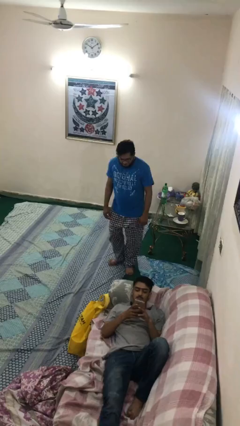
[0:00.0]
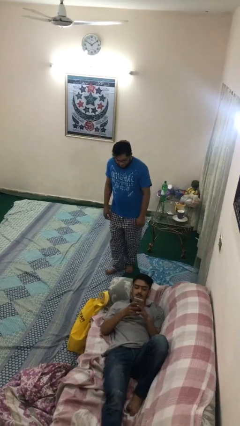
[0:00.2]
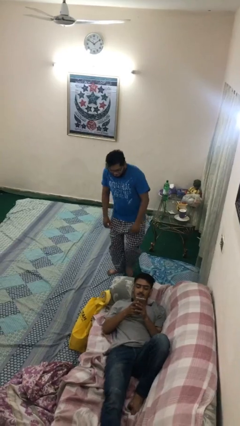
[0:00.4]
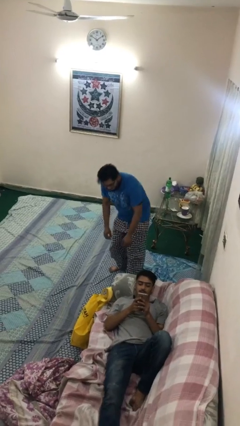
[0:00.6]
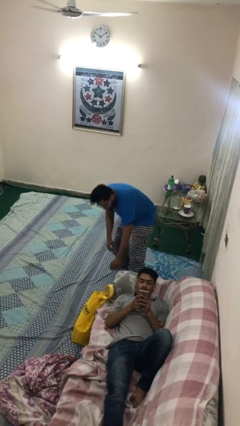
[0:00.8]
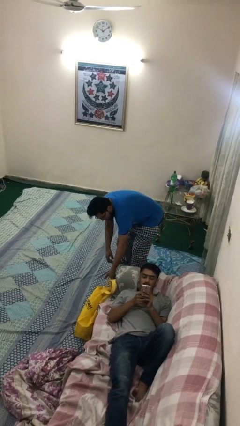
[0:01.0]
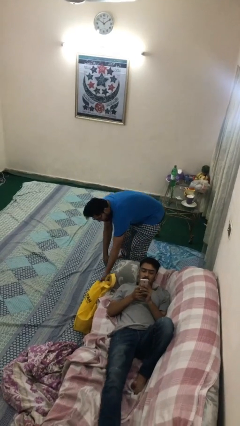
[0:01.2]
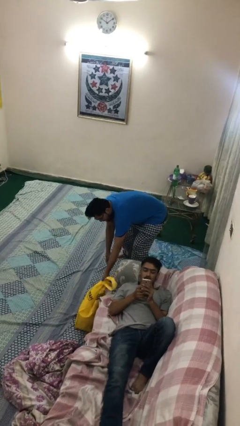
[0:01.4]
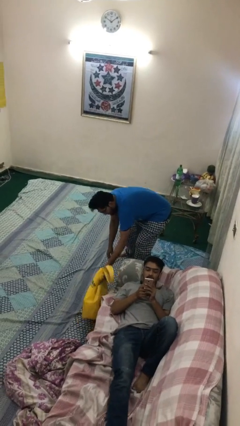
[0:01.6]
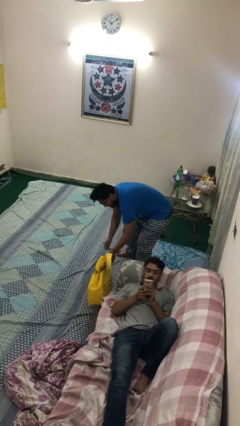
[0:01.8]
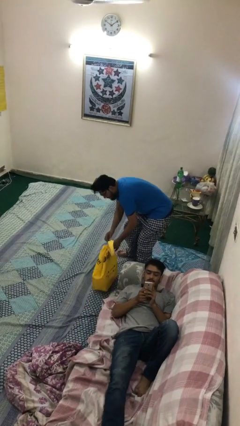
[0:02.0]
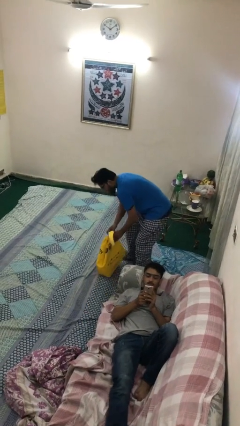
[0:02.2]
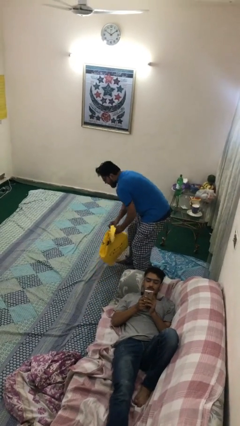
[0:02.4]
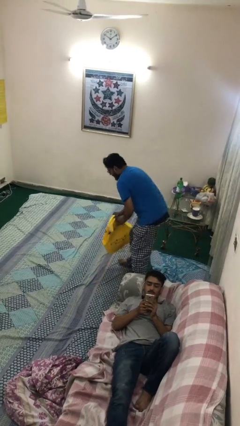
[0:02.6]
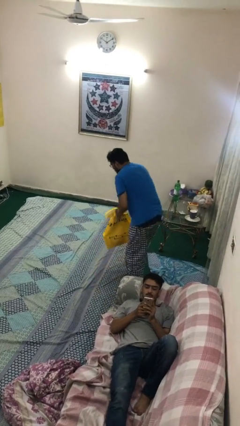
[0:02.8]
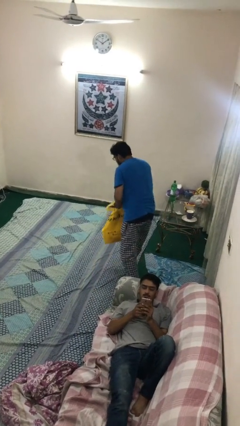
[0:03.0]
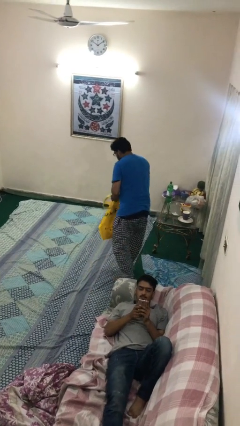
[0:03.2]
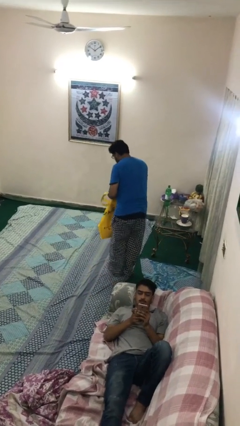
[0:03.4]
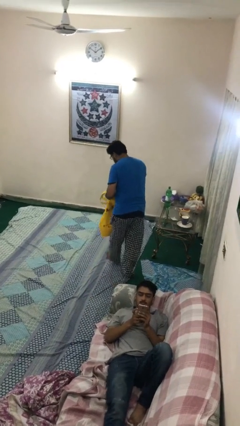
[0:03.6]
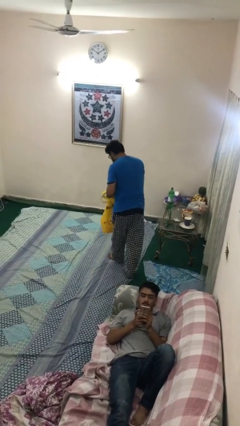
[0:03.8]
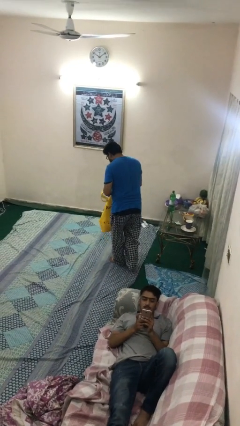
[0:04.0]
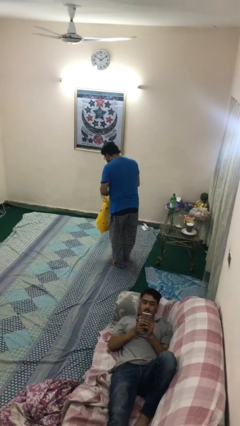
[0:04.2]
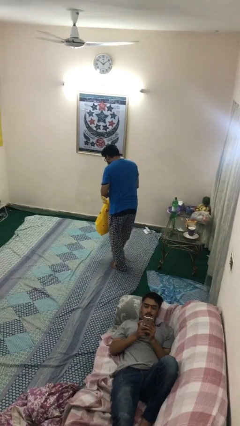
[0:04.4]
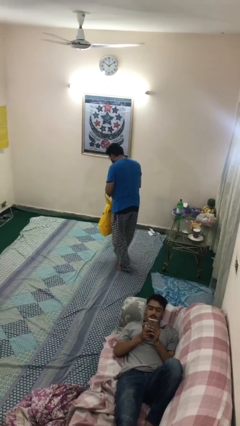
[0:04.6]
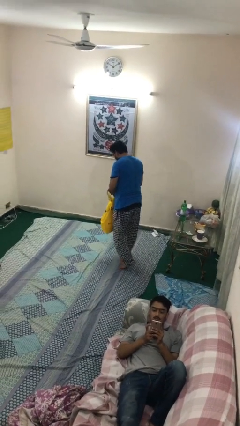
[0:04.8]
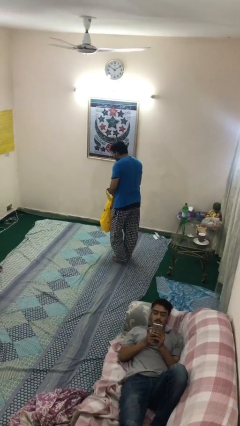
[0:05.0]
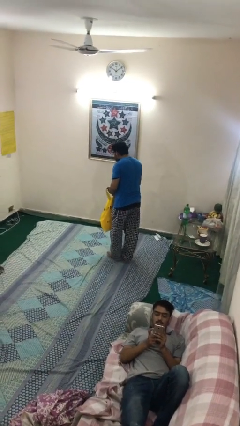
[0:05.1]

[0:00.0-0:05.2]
person steals object from person

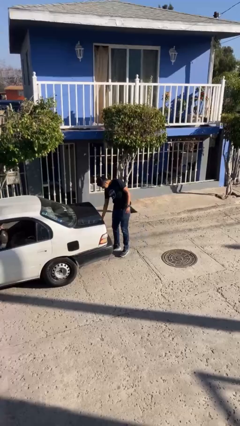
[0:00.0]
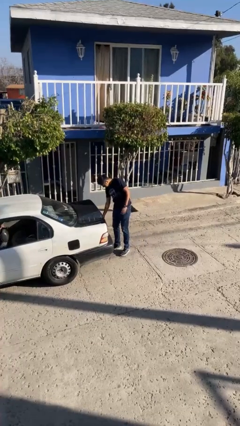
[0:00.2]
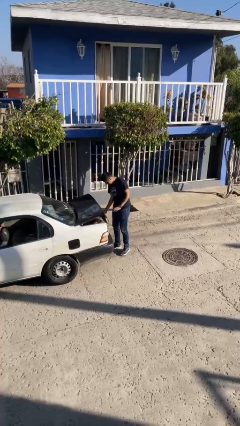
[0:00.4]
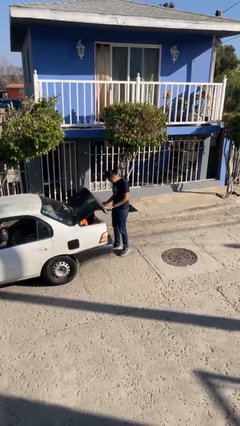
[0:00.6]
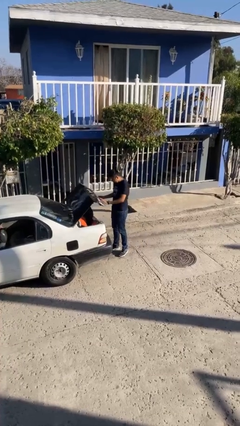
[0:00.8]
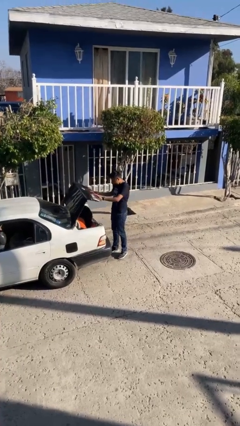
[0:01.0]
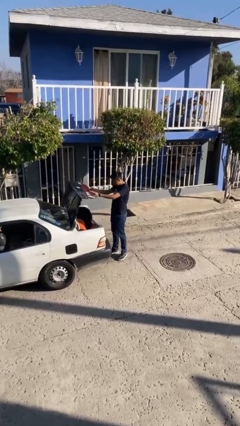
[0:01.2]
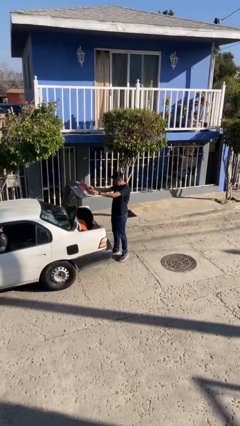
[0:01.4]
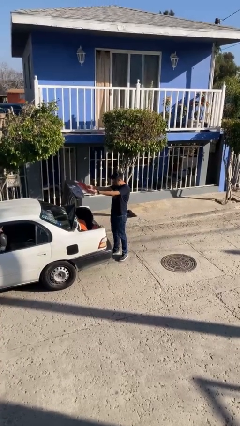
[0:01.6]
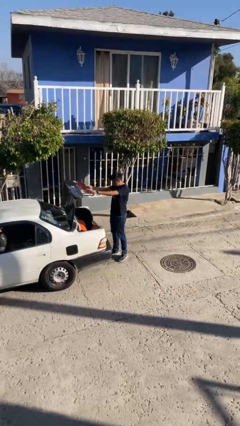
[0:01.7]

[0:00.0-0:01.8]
person opens car trunk

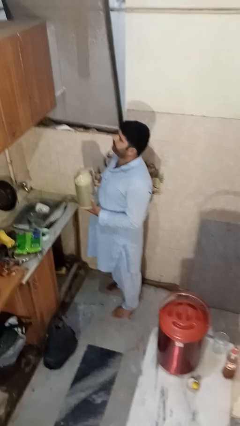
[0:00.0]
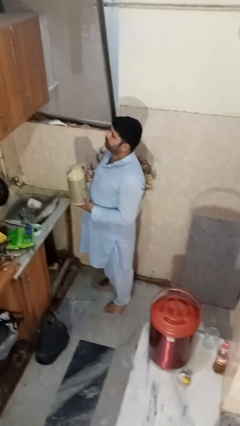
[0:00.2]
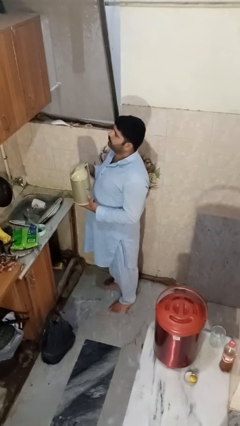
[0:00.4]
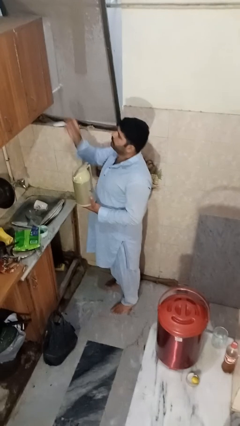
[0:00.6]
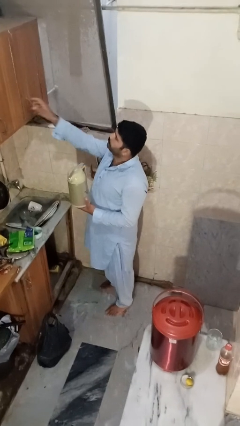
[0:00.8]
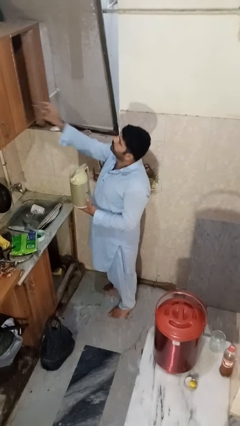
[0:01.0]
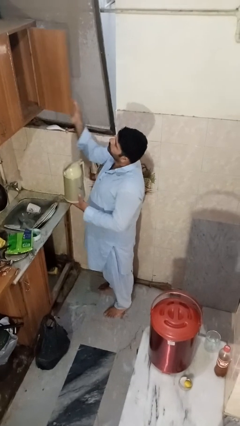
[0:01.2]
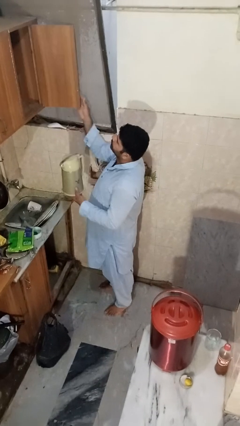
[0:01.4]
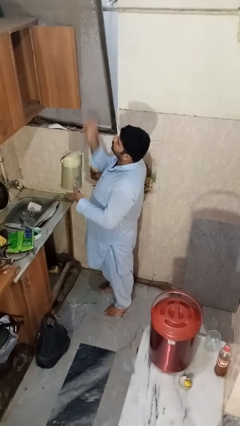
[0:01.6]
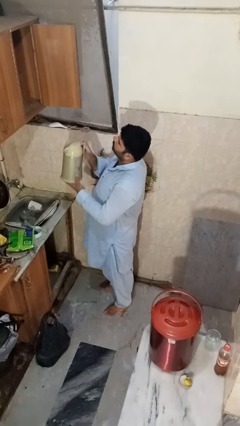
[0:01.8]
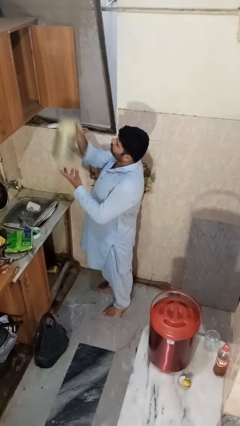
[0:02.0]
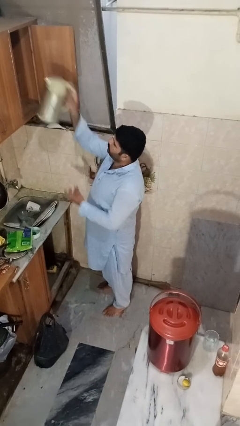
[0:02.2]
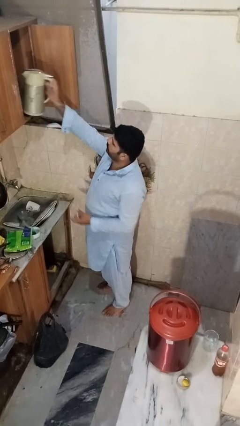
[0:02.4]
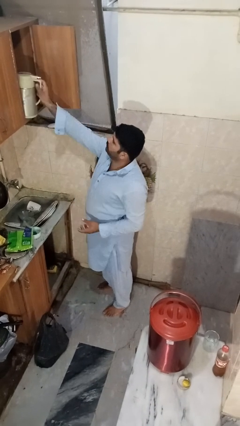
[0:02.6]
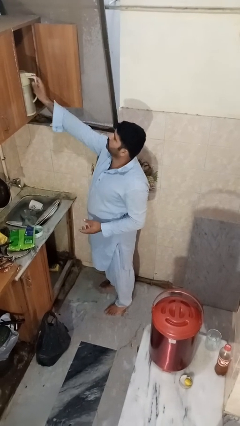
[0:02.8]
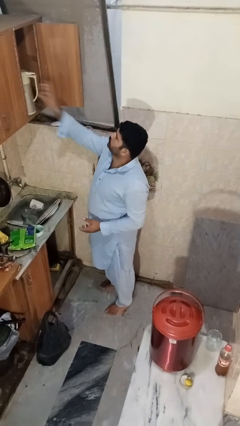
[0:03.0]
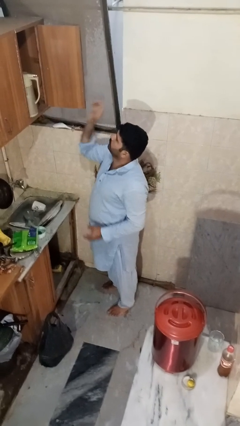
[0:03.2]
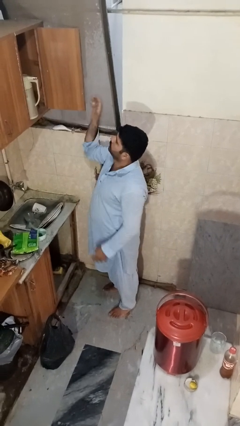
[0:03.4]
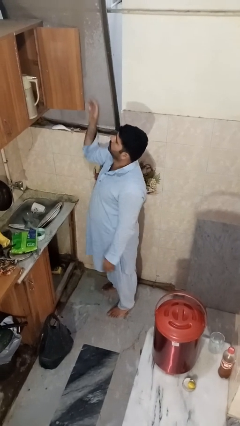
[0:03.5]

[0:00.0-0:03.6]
person puts object in cabinet

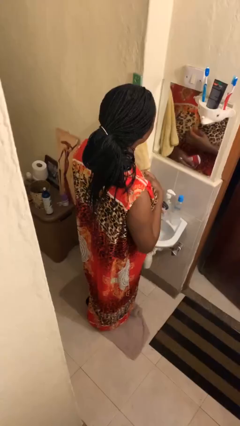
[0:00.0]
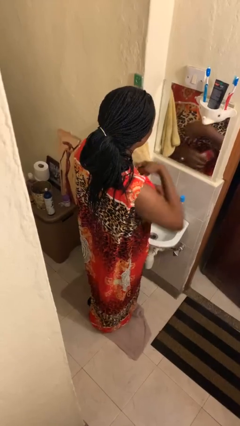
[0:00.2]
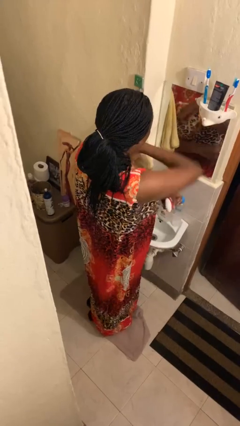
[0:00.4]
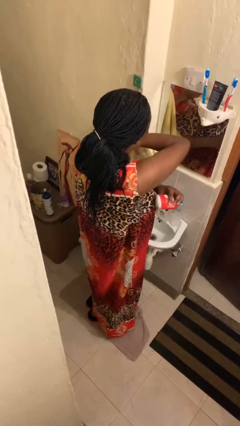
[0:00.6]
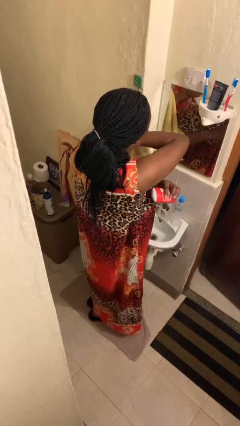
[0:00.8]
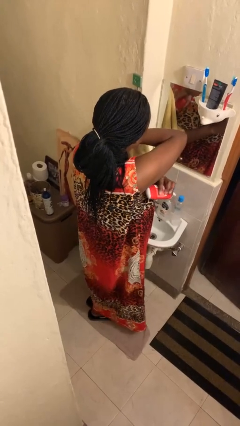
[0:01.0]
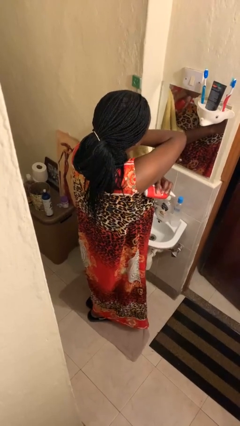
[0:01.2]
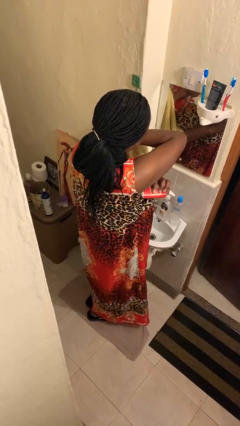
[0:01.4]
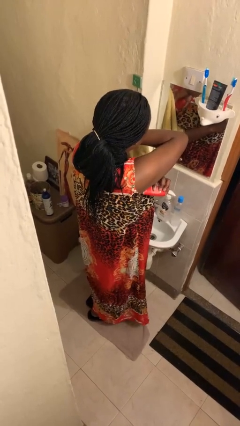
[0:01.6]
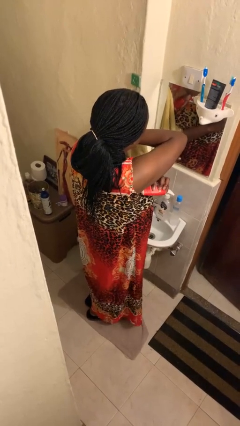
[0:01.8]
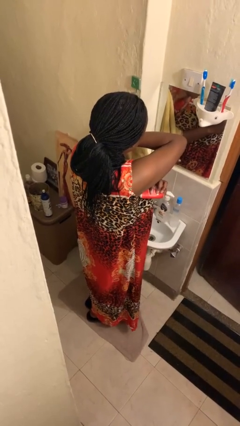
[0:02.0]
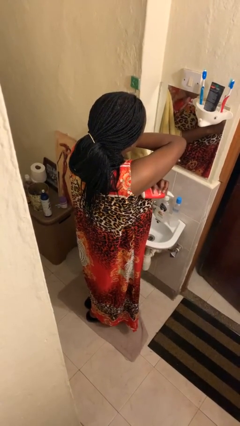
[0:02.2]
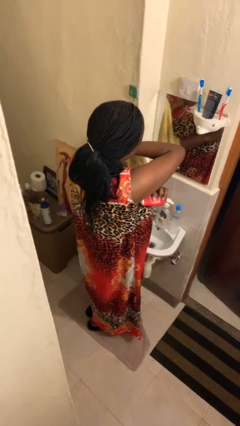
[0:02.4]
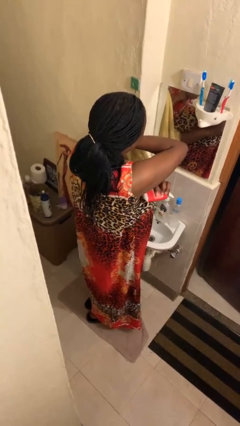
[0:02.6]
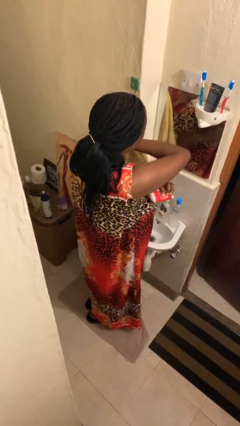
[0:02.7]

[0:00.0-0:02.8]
person applies deodorant

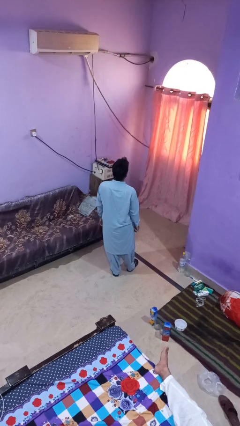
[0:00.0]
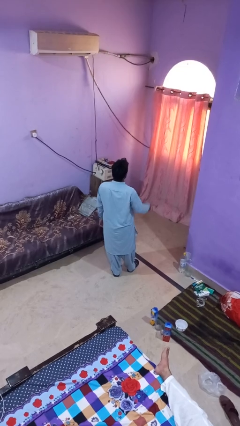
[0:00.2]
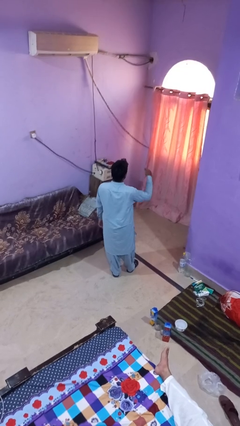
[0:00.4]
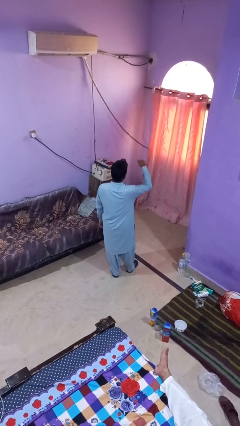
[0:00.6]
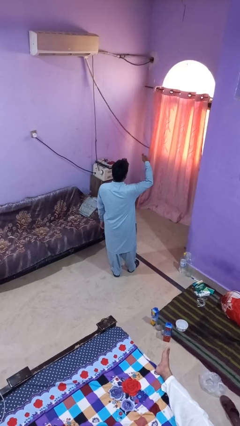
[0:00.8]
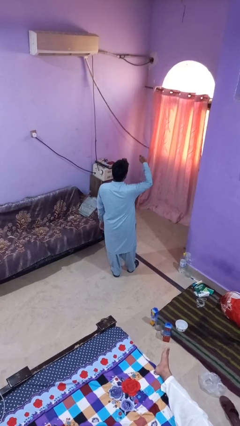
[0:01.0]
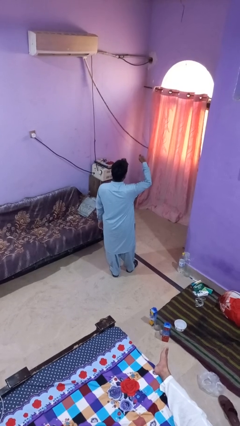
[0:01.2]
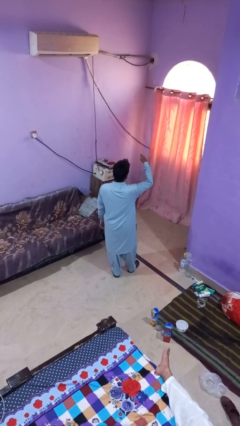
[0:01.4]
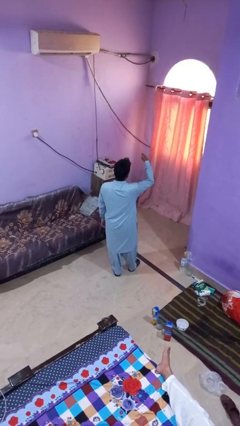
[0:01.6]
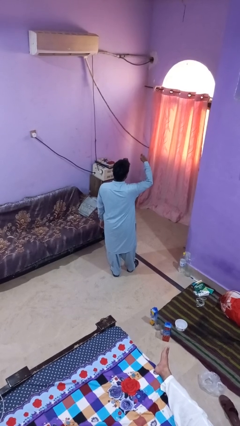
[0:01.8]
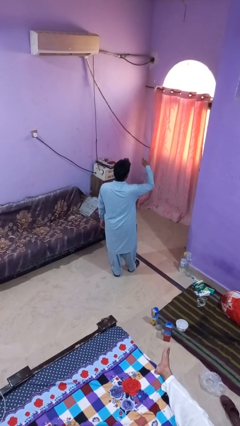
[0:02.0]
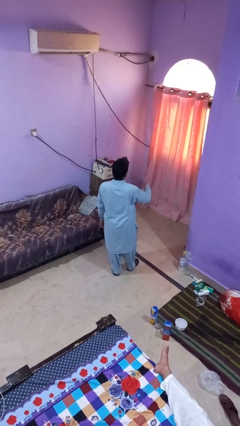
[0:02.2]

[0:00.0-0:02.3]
person gestures thumbs up

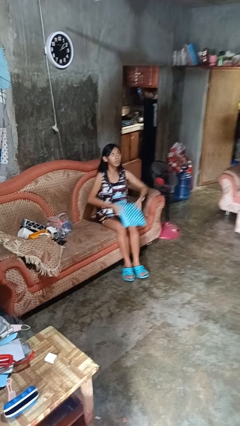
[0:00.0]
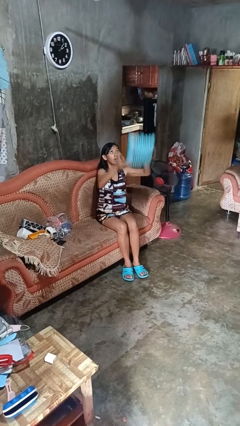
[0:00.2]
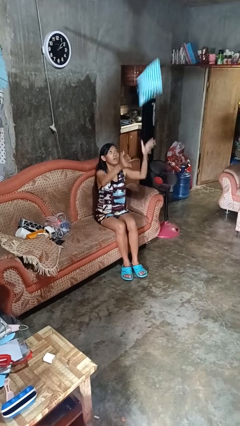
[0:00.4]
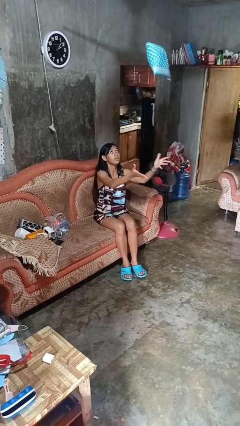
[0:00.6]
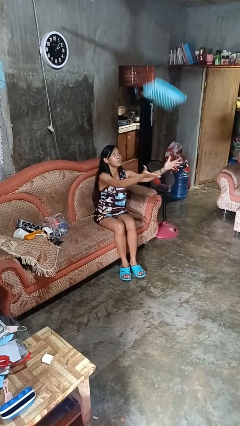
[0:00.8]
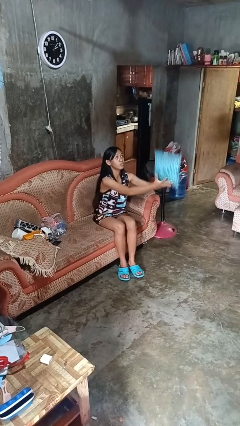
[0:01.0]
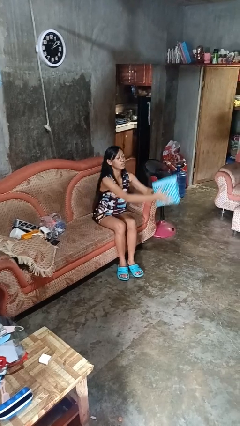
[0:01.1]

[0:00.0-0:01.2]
person drops object

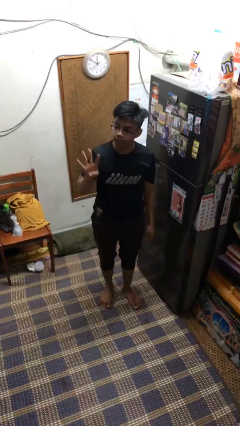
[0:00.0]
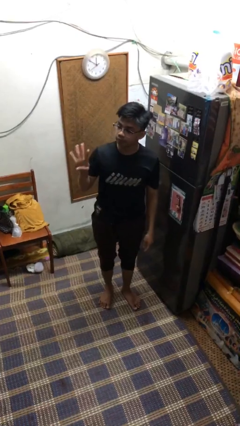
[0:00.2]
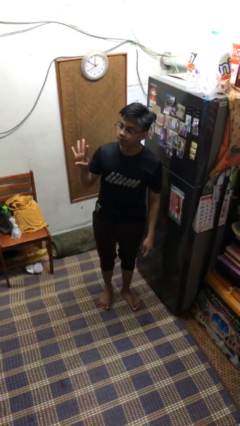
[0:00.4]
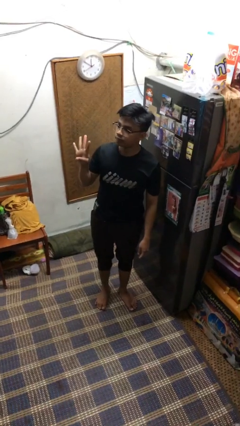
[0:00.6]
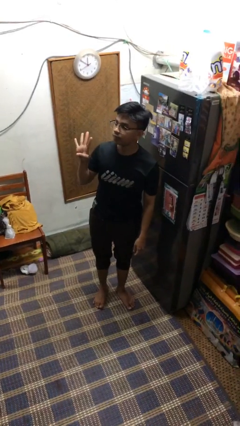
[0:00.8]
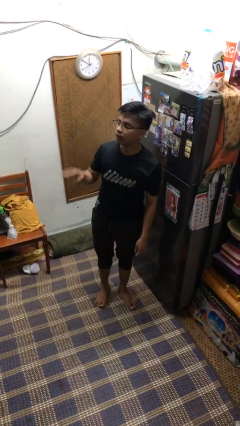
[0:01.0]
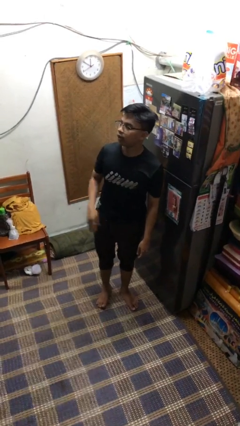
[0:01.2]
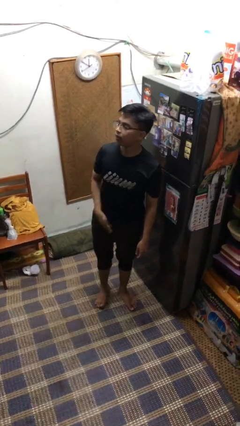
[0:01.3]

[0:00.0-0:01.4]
person gestures number four
